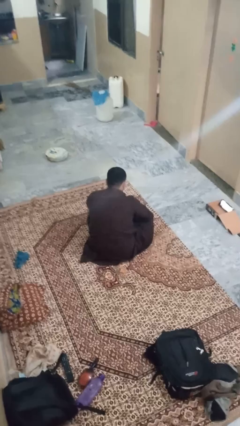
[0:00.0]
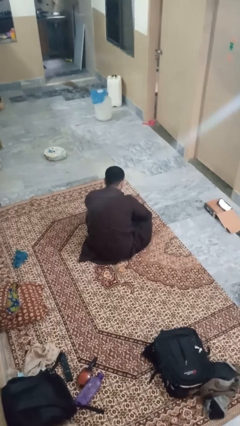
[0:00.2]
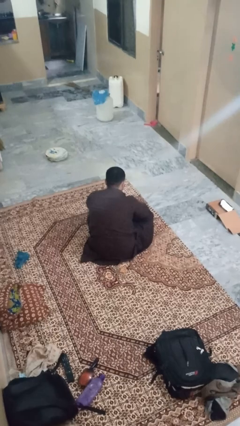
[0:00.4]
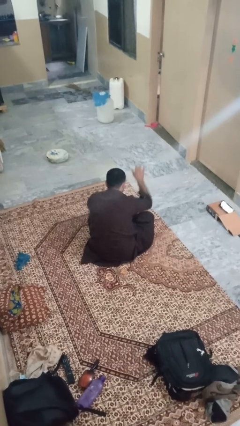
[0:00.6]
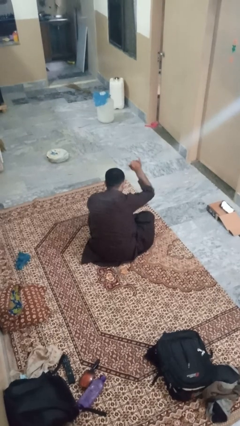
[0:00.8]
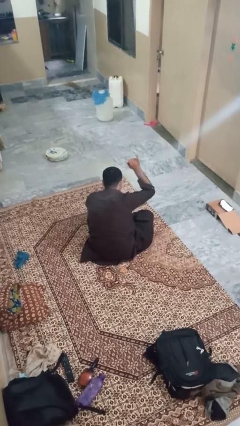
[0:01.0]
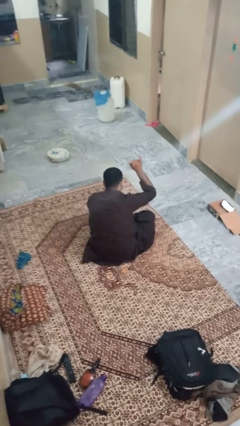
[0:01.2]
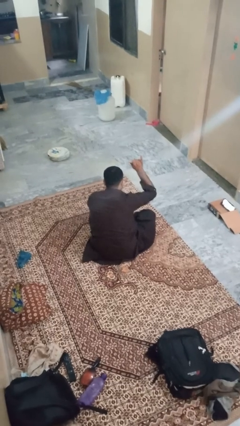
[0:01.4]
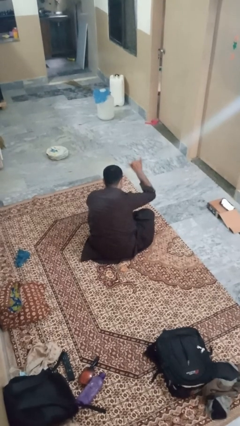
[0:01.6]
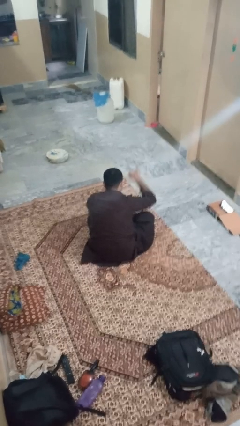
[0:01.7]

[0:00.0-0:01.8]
person gestures hang loose

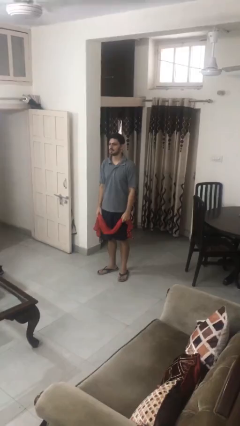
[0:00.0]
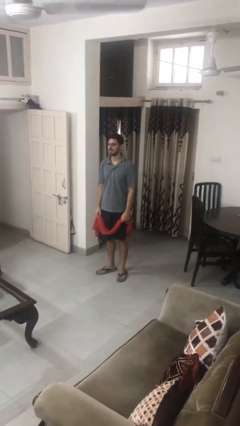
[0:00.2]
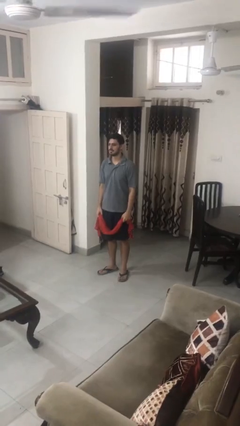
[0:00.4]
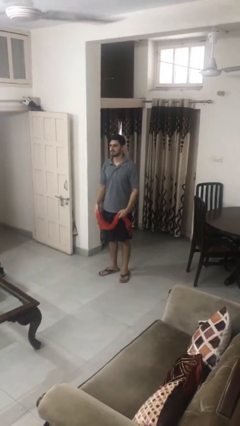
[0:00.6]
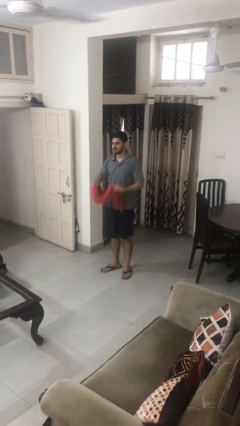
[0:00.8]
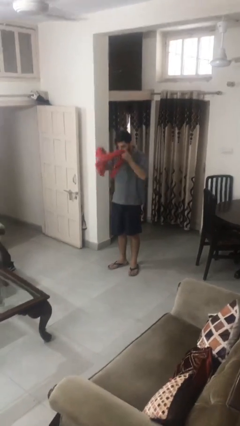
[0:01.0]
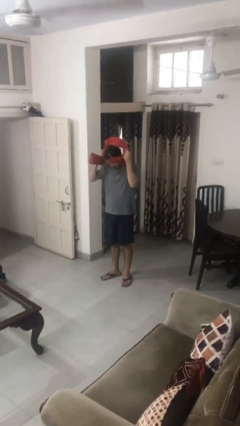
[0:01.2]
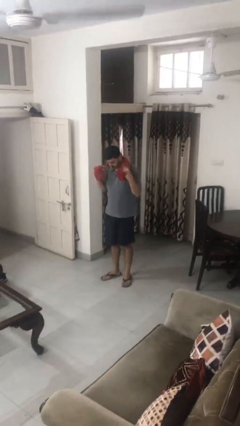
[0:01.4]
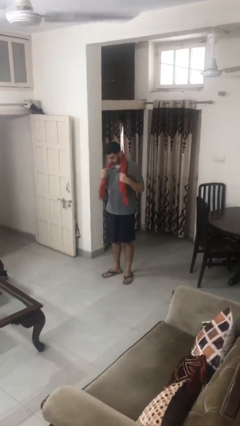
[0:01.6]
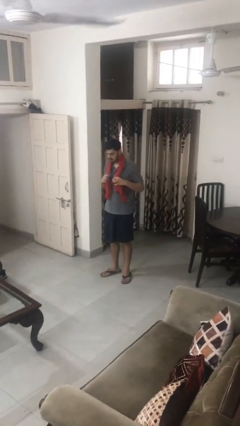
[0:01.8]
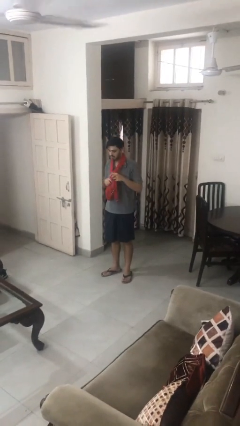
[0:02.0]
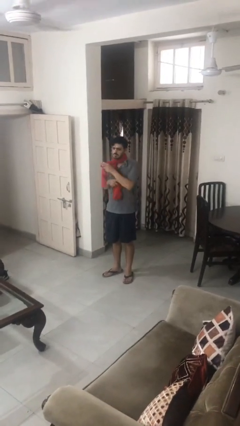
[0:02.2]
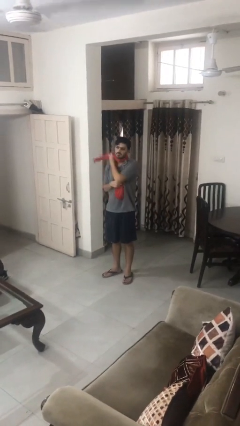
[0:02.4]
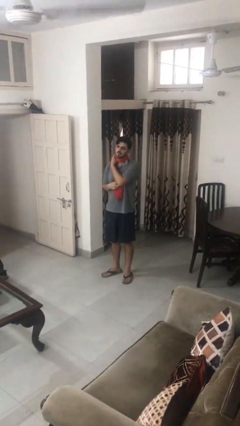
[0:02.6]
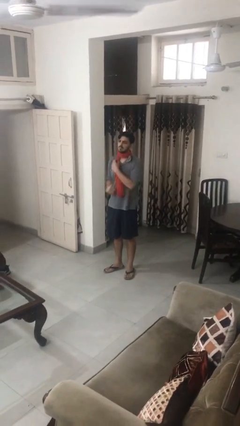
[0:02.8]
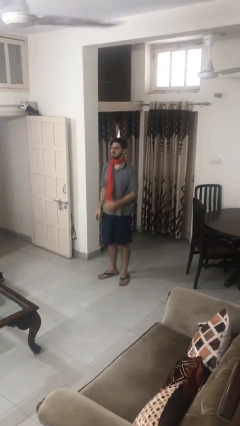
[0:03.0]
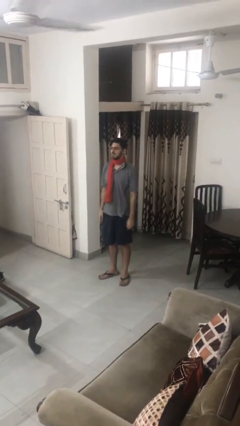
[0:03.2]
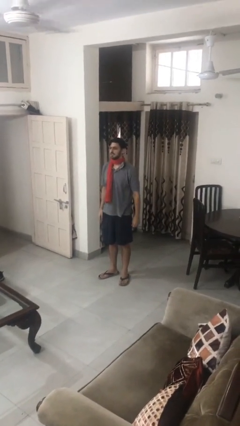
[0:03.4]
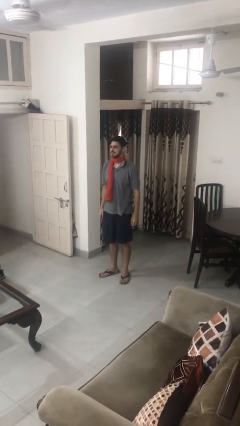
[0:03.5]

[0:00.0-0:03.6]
person puts on scarf

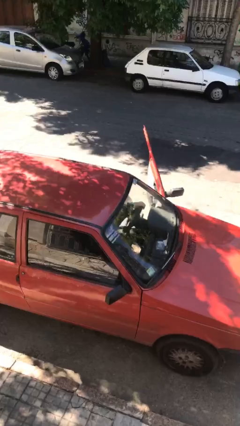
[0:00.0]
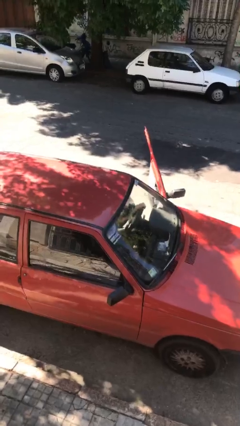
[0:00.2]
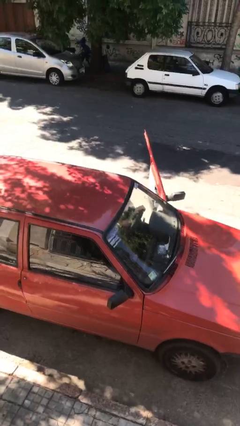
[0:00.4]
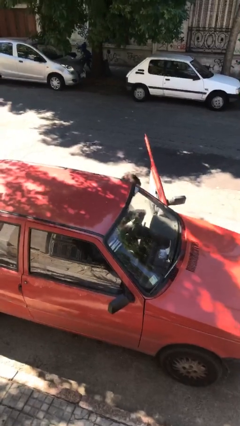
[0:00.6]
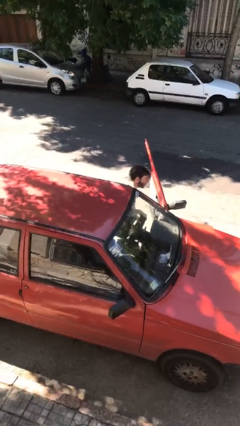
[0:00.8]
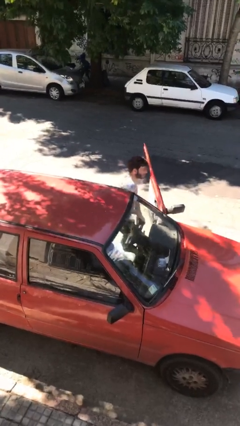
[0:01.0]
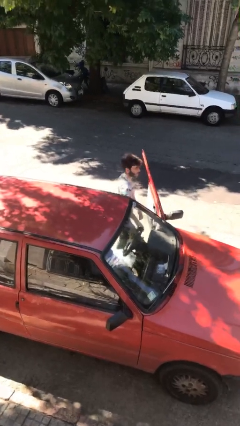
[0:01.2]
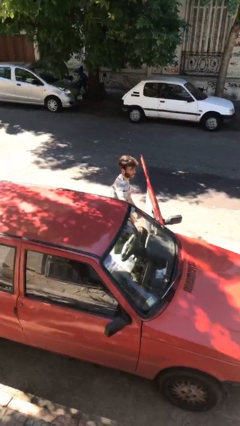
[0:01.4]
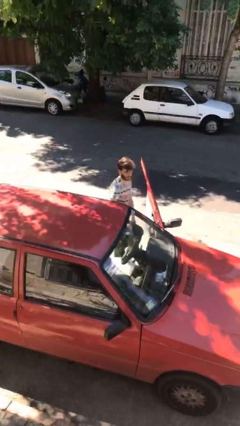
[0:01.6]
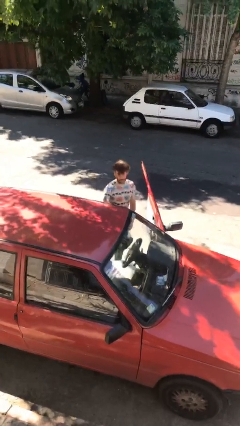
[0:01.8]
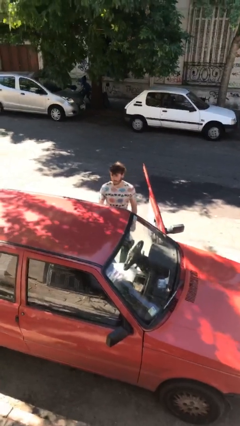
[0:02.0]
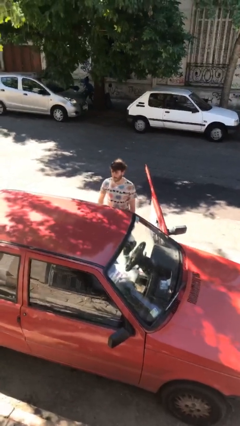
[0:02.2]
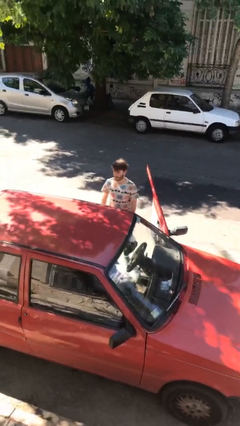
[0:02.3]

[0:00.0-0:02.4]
person exits car

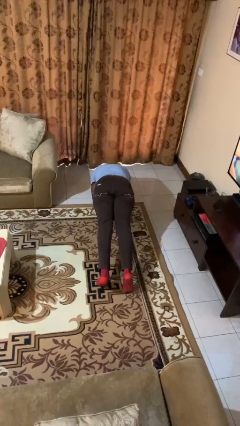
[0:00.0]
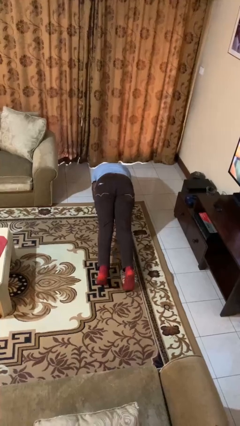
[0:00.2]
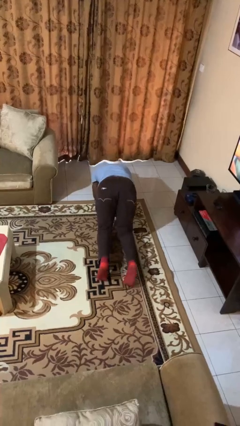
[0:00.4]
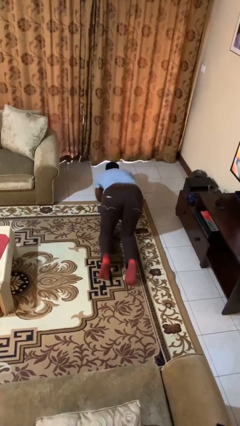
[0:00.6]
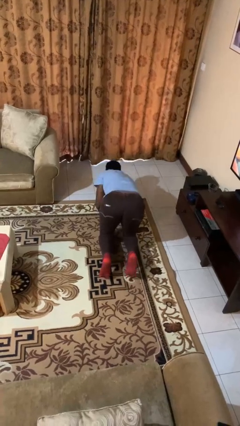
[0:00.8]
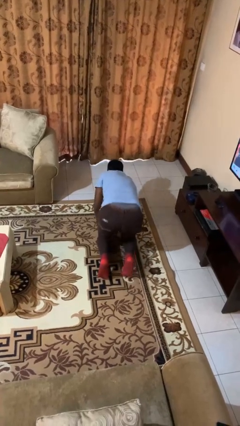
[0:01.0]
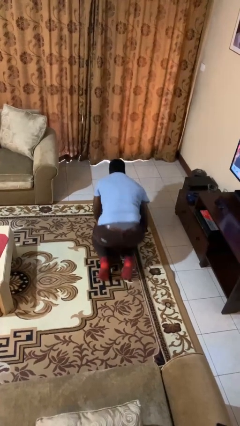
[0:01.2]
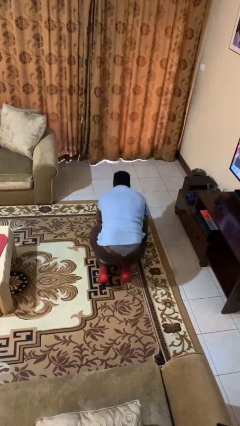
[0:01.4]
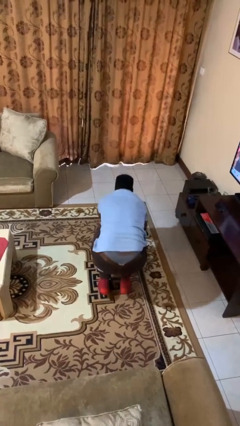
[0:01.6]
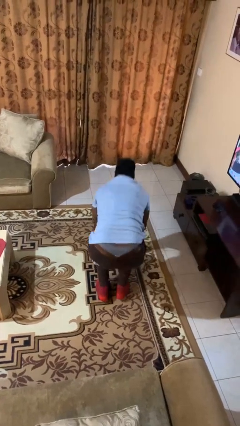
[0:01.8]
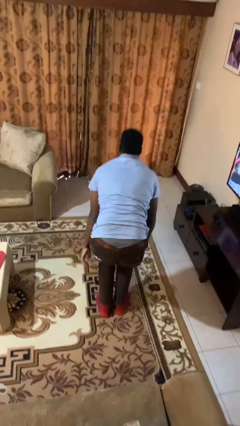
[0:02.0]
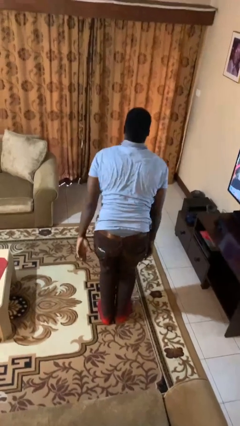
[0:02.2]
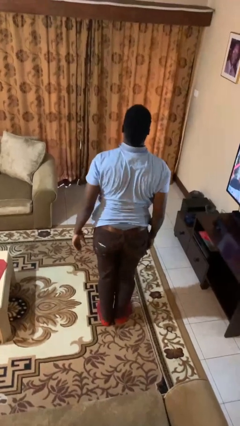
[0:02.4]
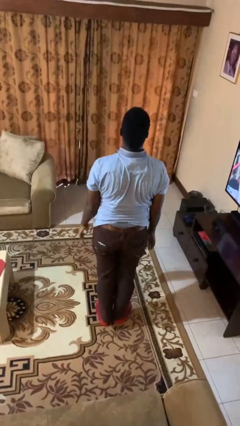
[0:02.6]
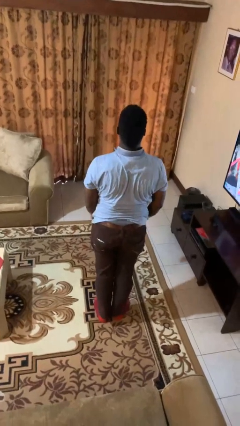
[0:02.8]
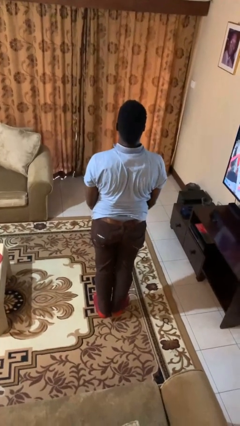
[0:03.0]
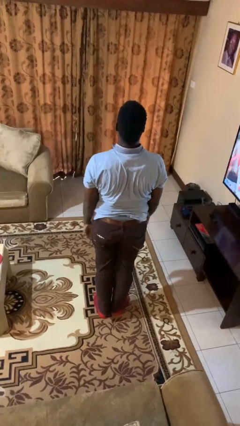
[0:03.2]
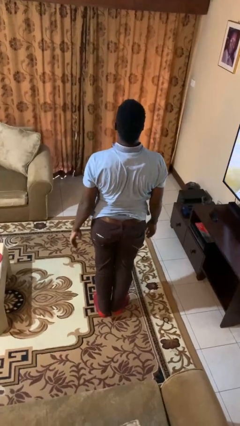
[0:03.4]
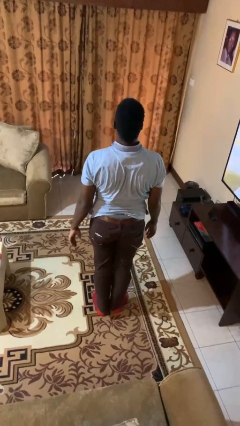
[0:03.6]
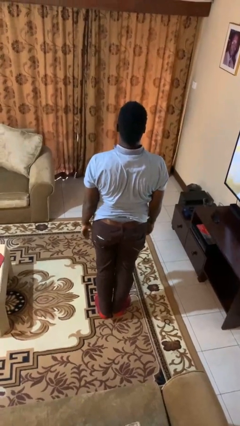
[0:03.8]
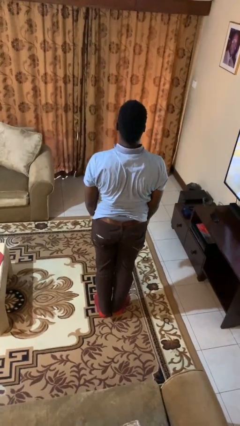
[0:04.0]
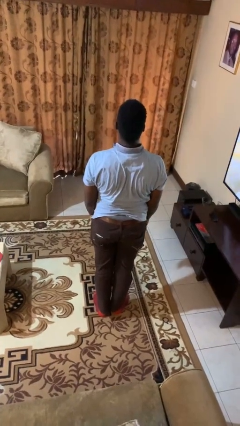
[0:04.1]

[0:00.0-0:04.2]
person stands up from floor

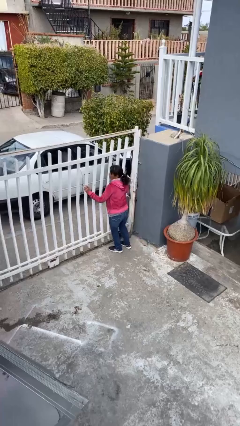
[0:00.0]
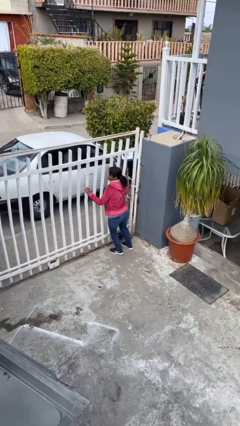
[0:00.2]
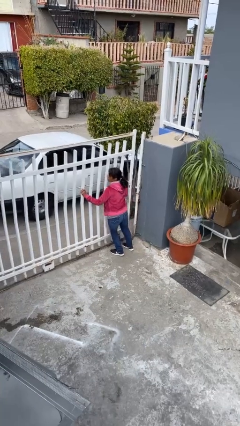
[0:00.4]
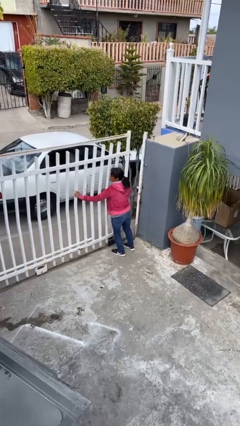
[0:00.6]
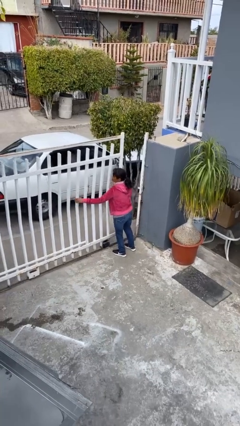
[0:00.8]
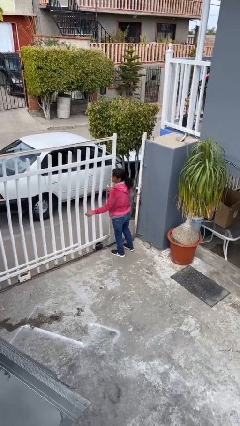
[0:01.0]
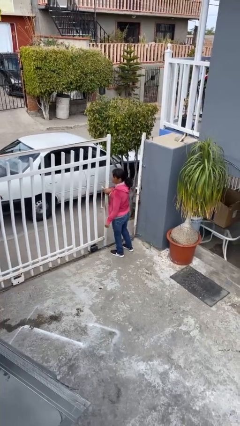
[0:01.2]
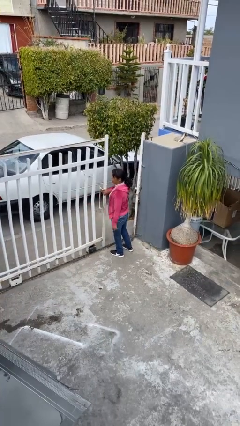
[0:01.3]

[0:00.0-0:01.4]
person opens facility door

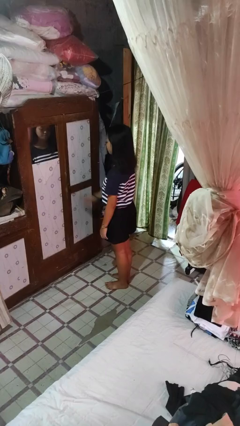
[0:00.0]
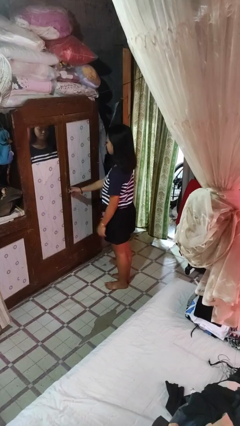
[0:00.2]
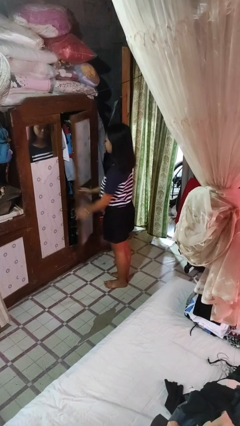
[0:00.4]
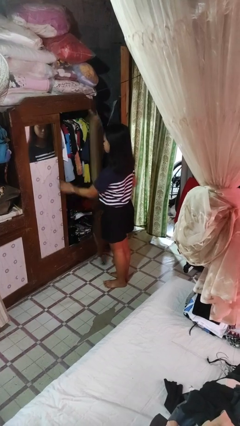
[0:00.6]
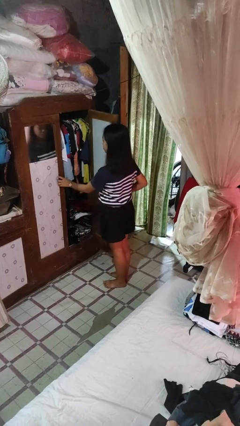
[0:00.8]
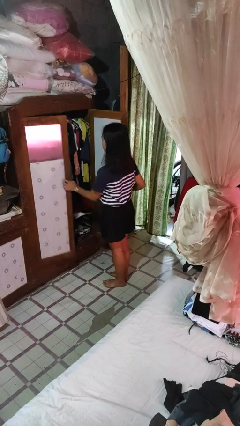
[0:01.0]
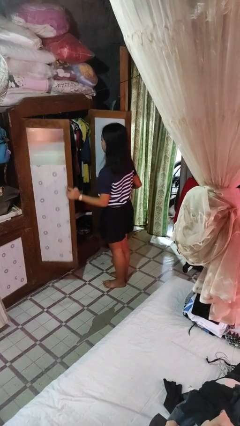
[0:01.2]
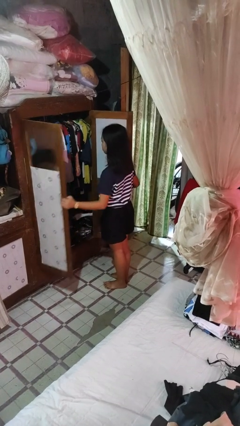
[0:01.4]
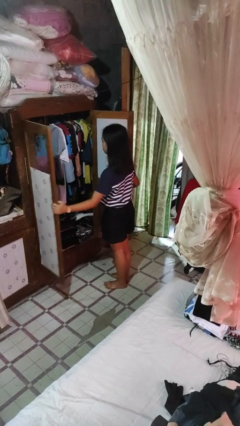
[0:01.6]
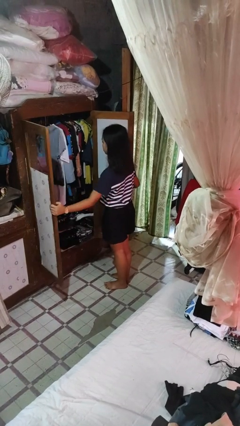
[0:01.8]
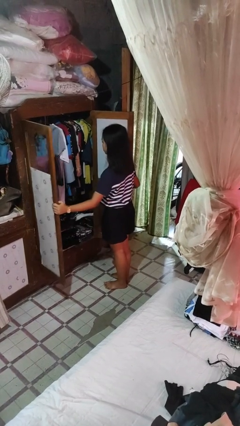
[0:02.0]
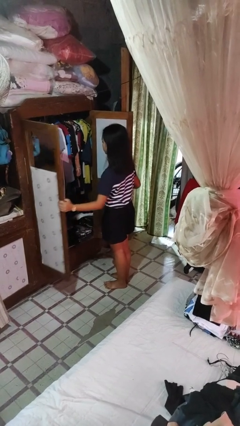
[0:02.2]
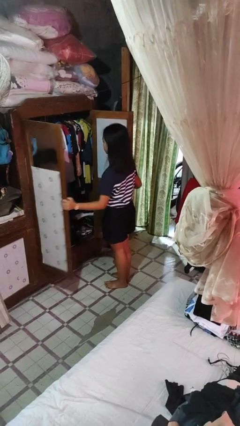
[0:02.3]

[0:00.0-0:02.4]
person opens closet door

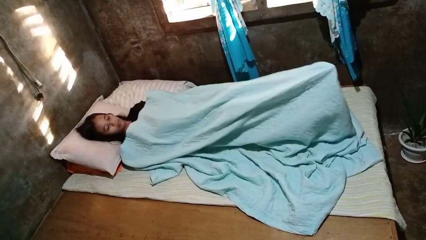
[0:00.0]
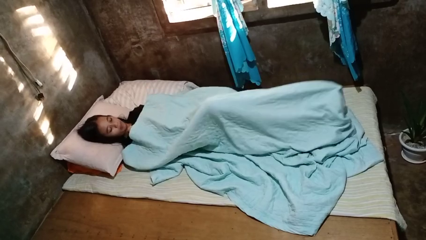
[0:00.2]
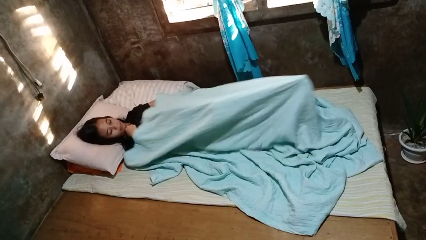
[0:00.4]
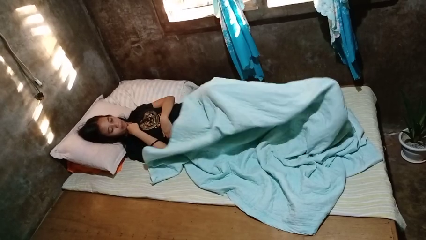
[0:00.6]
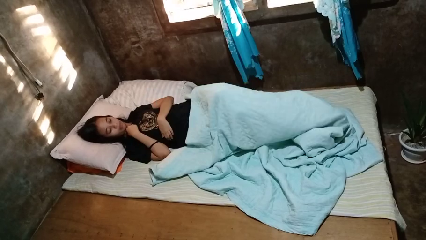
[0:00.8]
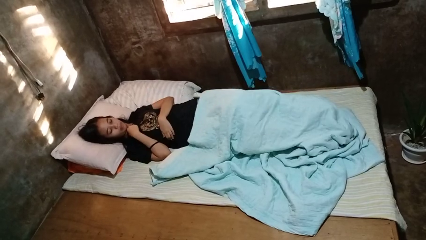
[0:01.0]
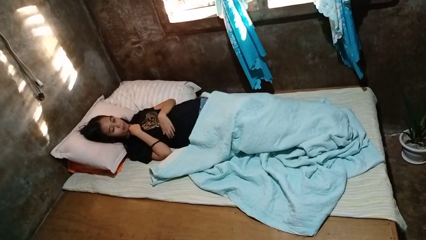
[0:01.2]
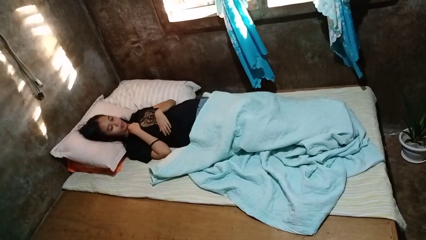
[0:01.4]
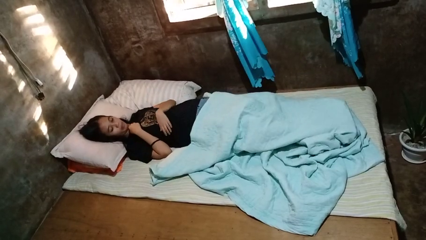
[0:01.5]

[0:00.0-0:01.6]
person uncovers with bedsheets
